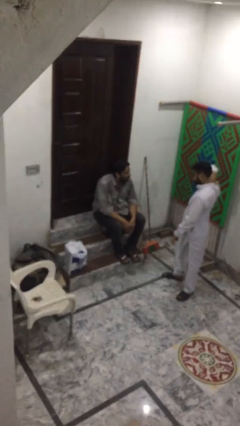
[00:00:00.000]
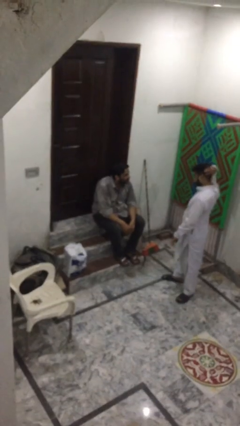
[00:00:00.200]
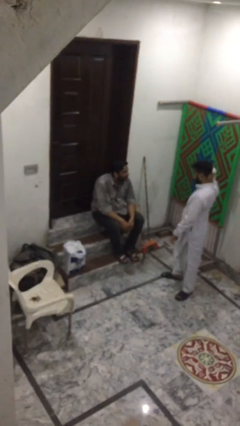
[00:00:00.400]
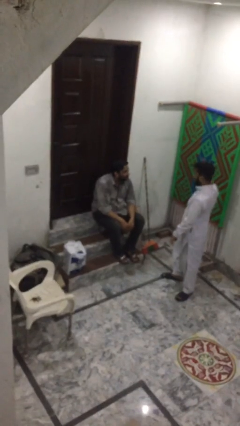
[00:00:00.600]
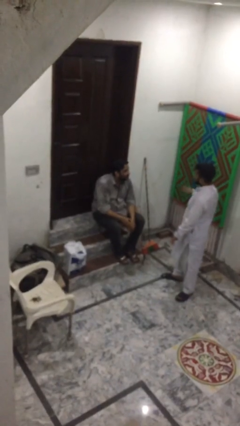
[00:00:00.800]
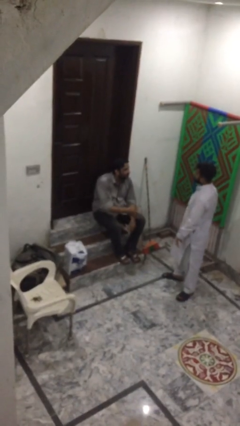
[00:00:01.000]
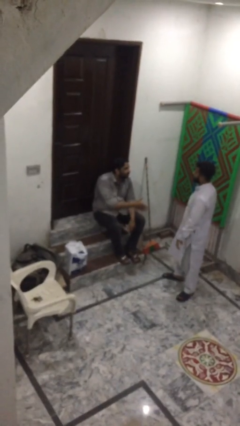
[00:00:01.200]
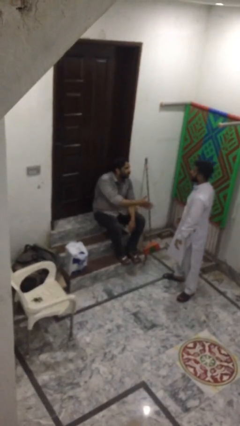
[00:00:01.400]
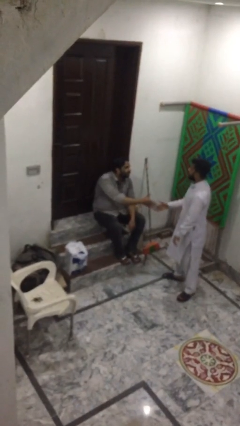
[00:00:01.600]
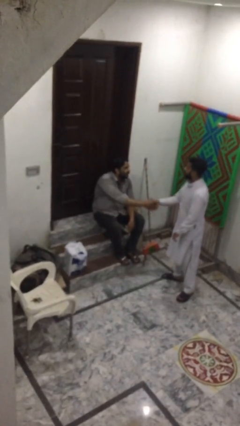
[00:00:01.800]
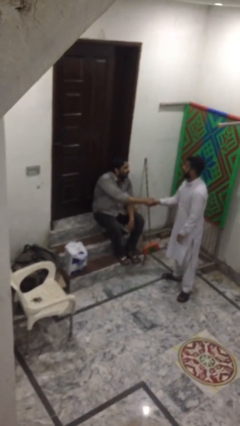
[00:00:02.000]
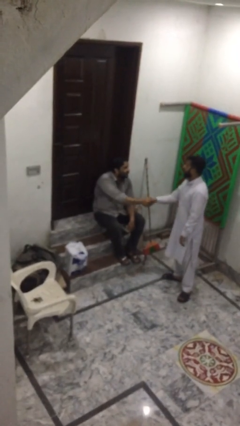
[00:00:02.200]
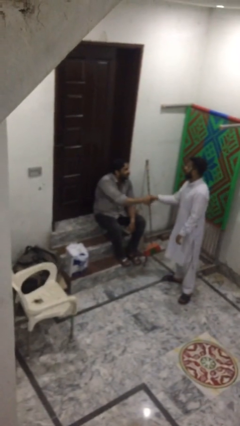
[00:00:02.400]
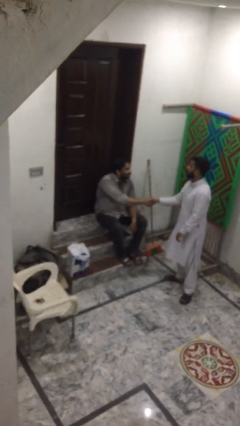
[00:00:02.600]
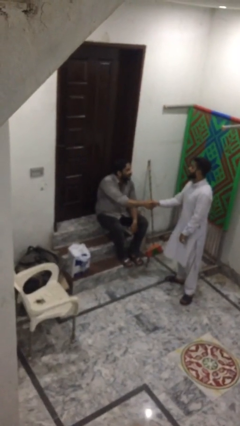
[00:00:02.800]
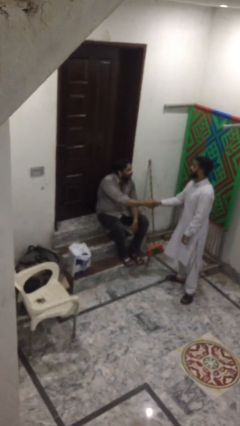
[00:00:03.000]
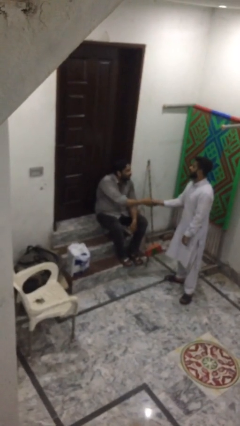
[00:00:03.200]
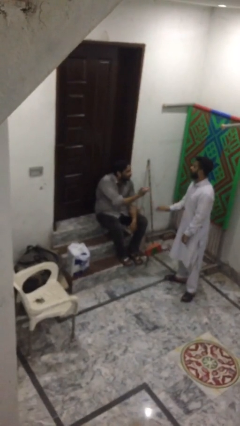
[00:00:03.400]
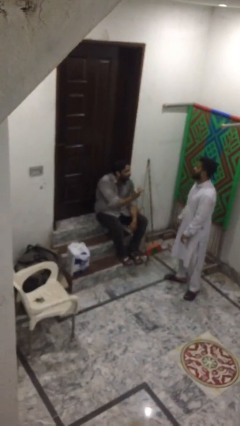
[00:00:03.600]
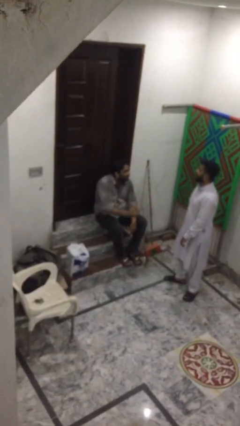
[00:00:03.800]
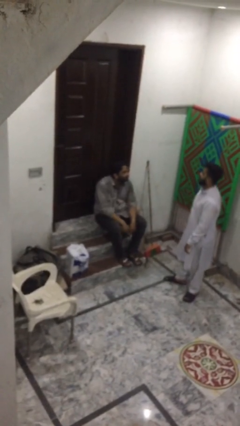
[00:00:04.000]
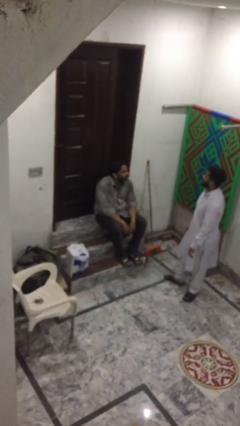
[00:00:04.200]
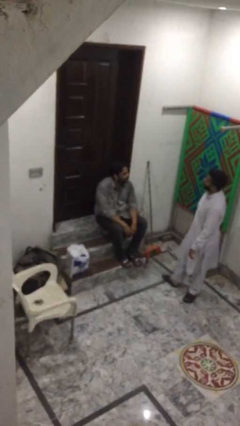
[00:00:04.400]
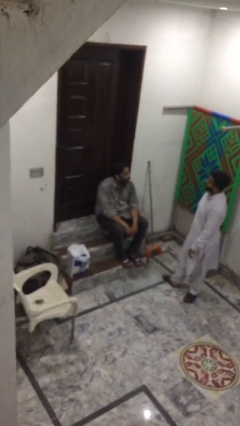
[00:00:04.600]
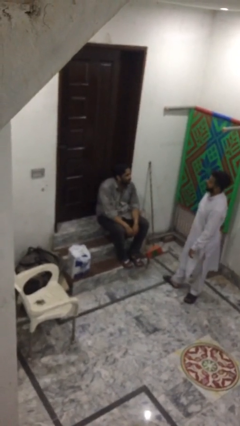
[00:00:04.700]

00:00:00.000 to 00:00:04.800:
person shakes hand

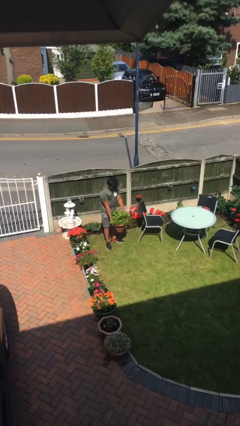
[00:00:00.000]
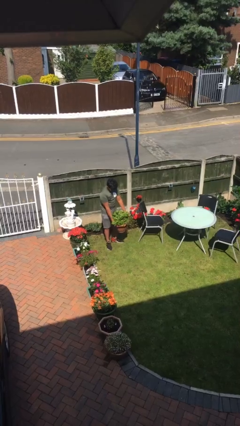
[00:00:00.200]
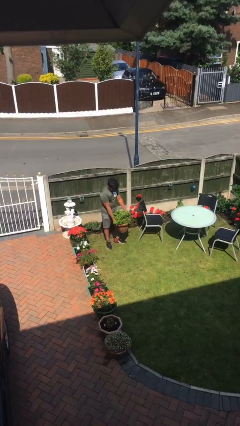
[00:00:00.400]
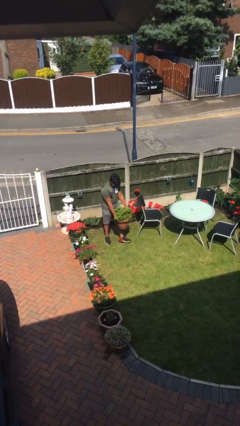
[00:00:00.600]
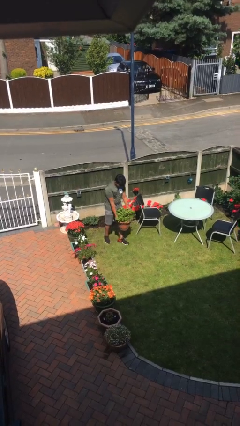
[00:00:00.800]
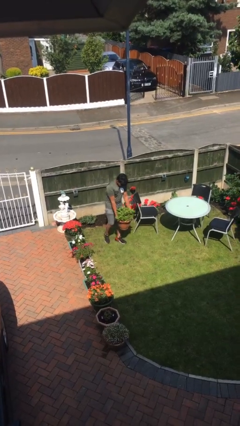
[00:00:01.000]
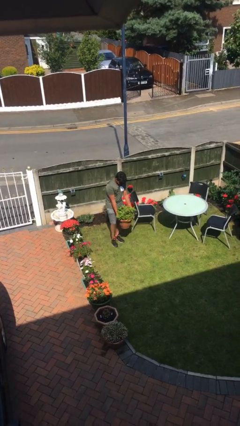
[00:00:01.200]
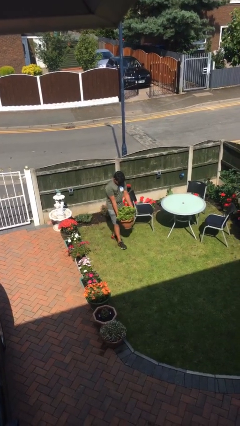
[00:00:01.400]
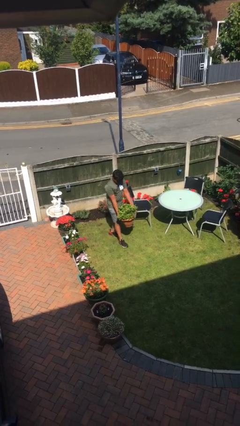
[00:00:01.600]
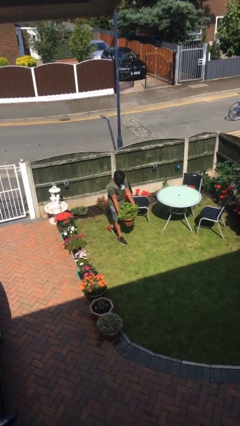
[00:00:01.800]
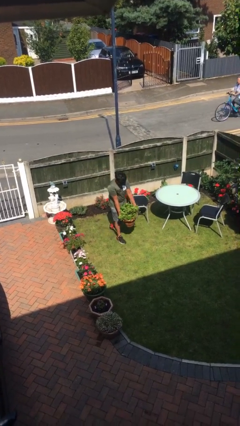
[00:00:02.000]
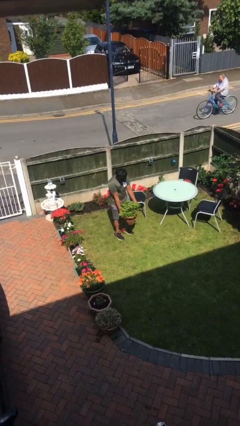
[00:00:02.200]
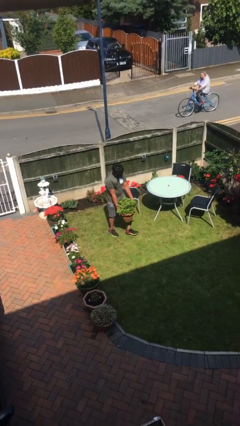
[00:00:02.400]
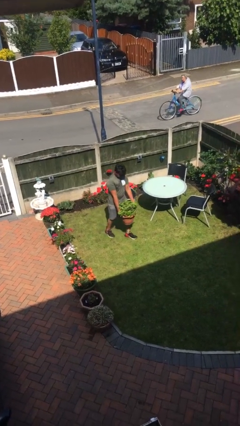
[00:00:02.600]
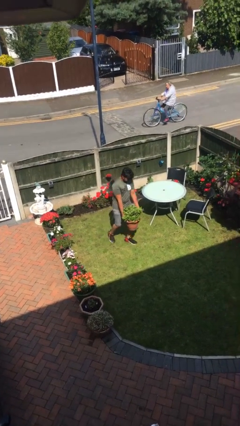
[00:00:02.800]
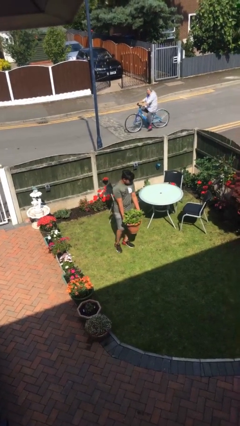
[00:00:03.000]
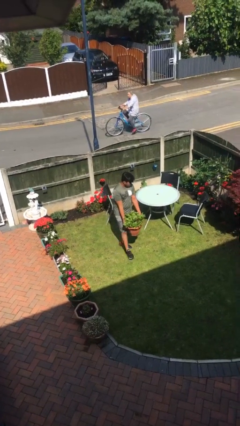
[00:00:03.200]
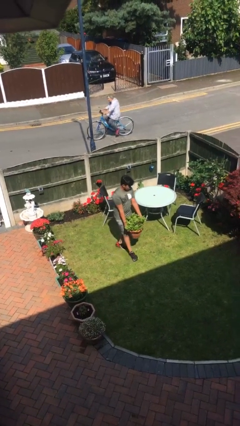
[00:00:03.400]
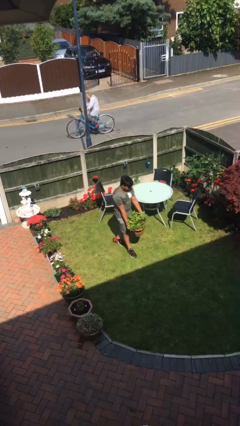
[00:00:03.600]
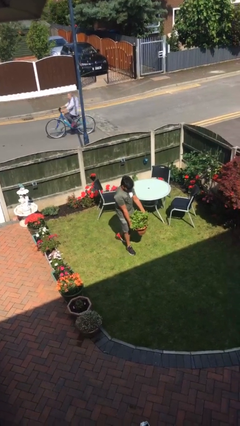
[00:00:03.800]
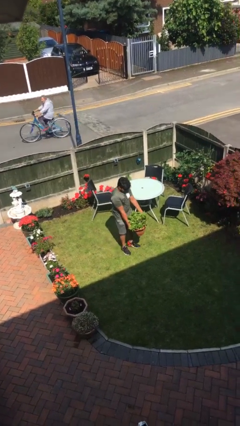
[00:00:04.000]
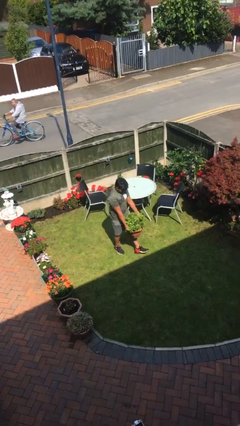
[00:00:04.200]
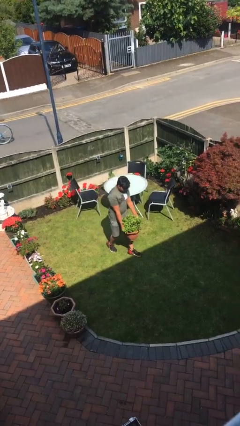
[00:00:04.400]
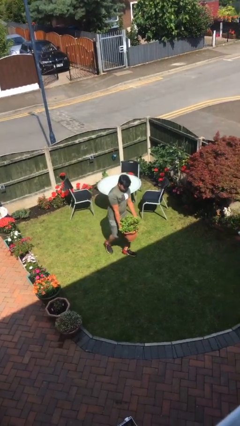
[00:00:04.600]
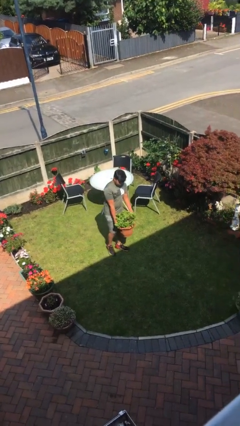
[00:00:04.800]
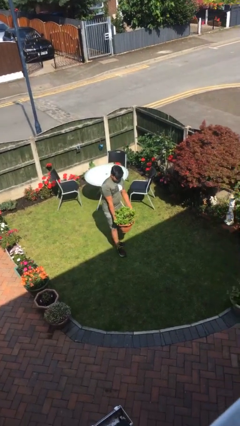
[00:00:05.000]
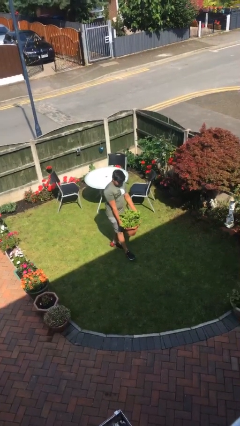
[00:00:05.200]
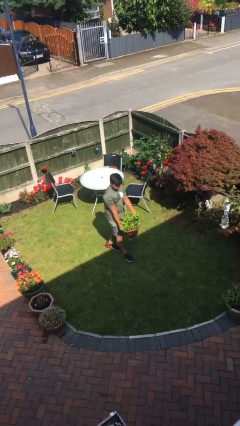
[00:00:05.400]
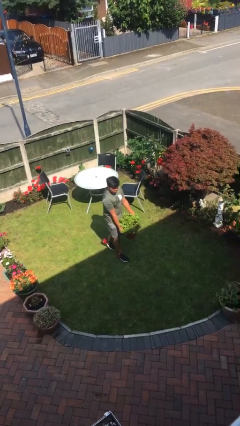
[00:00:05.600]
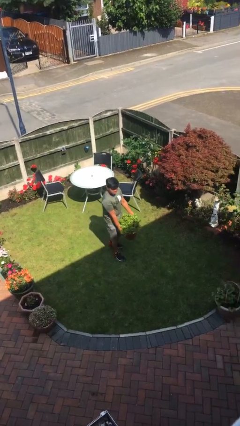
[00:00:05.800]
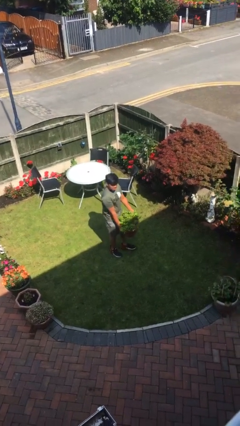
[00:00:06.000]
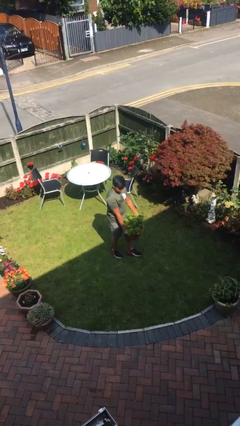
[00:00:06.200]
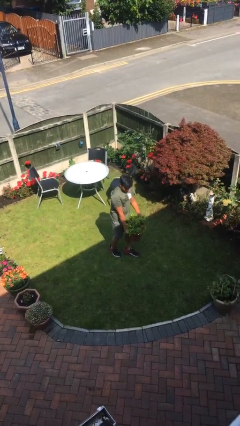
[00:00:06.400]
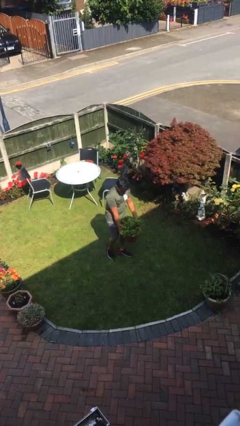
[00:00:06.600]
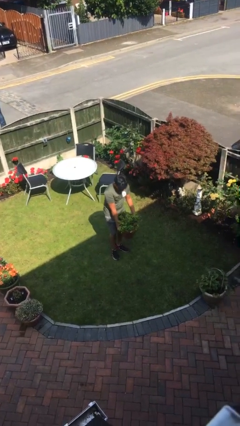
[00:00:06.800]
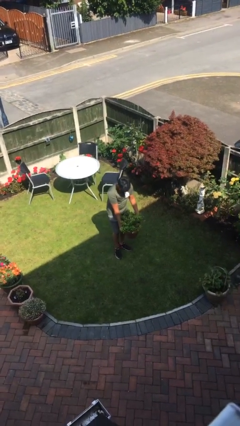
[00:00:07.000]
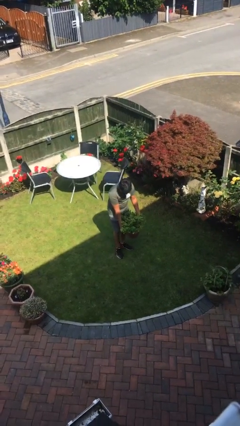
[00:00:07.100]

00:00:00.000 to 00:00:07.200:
person carries heavy object

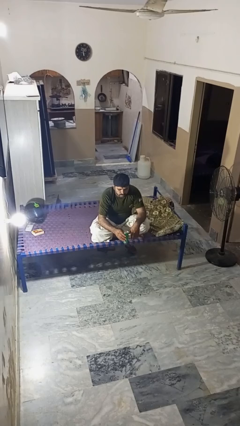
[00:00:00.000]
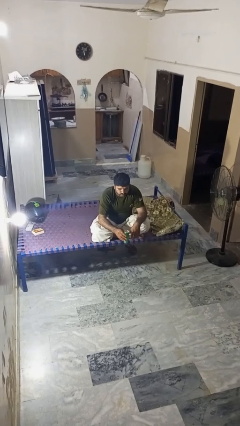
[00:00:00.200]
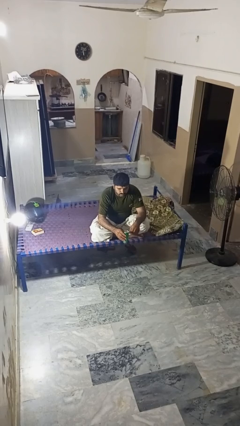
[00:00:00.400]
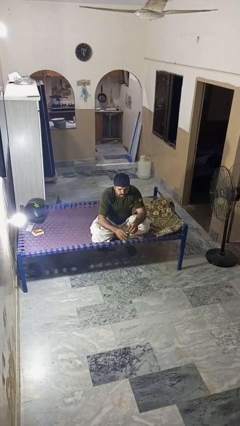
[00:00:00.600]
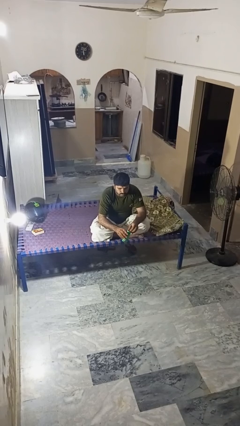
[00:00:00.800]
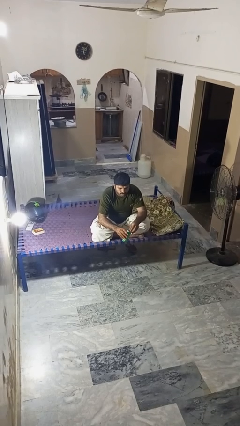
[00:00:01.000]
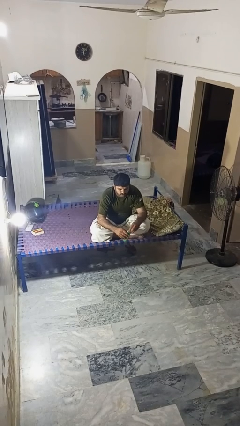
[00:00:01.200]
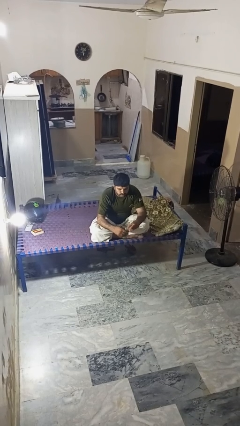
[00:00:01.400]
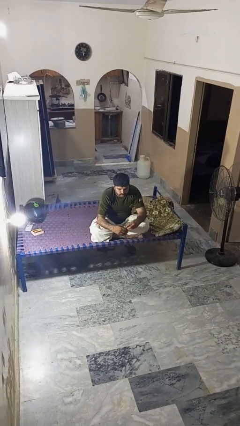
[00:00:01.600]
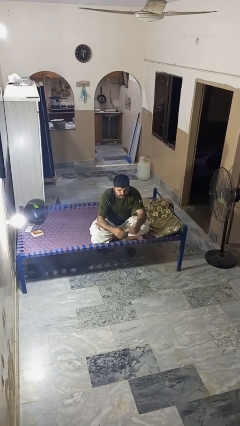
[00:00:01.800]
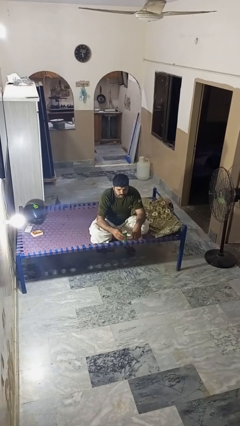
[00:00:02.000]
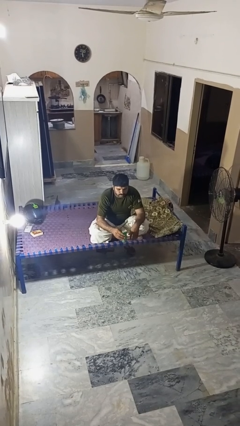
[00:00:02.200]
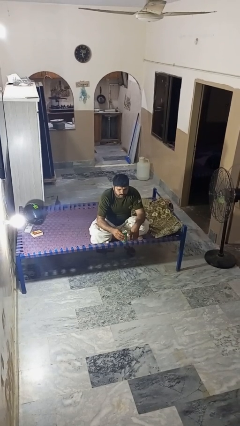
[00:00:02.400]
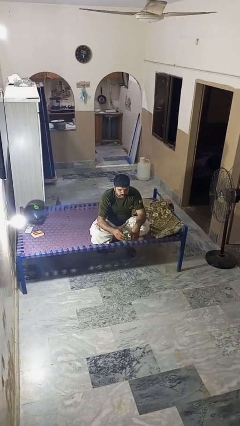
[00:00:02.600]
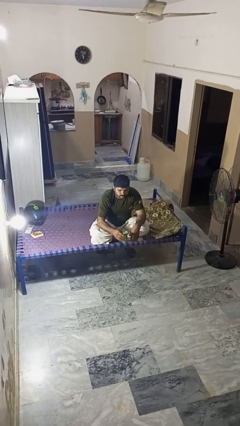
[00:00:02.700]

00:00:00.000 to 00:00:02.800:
person opens beverage can

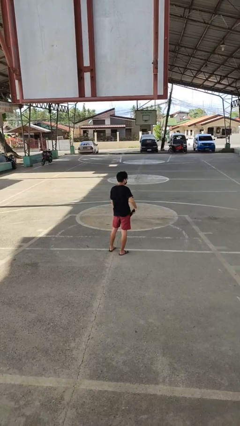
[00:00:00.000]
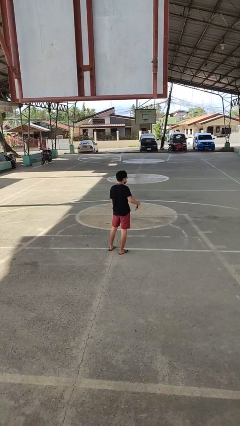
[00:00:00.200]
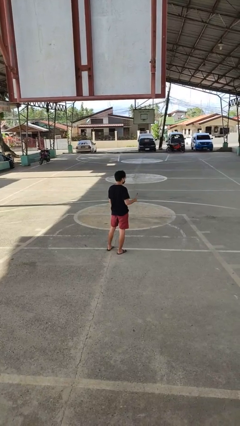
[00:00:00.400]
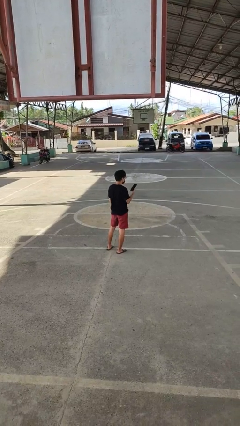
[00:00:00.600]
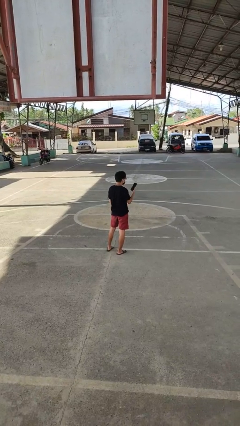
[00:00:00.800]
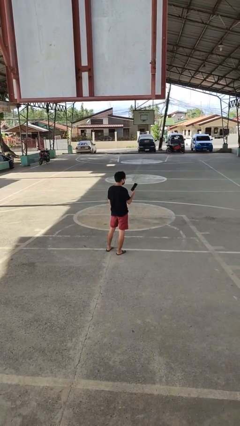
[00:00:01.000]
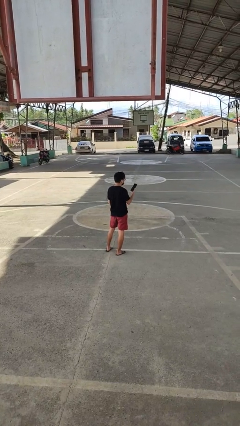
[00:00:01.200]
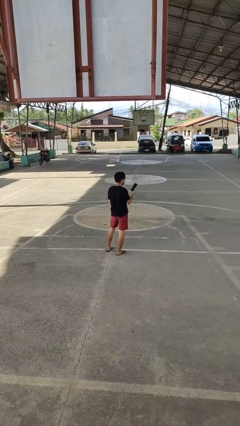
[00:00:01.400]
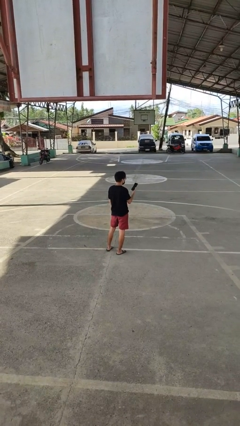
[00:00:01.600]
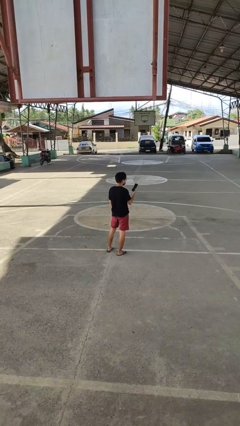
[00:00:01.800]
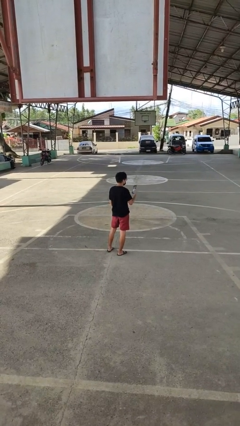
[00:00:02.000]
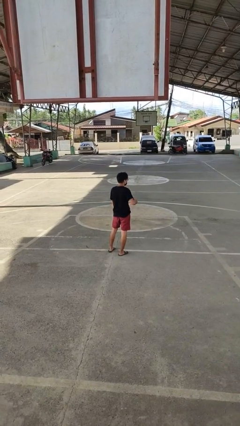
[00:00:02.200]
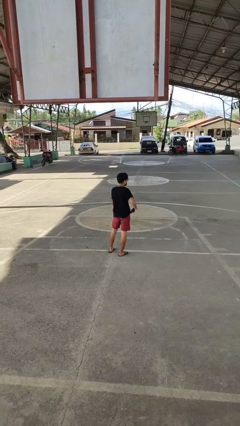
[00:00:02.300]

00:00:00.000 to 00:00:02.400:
person takes phone from pocket
